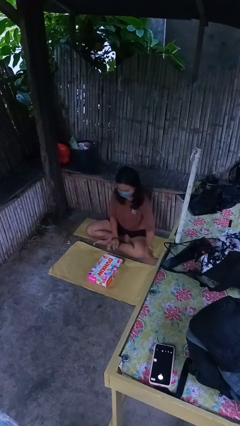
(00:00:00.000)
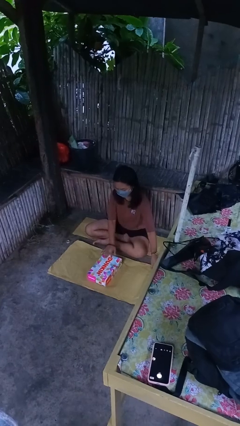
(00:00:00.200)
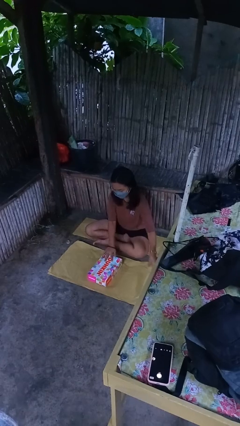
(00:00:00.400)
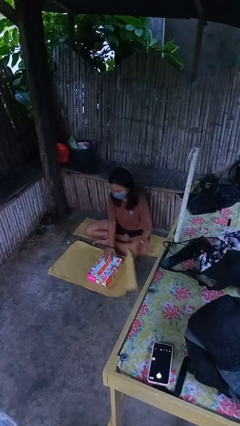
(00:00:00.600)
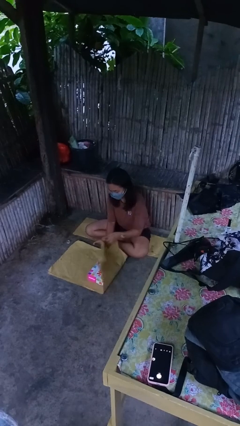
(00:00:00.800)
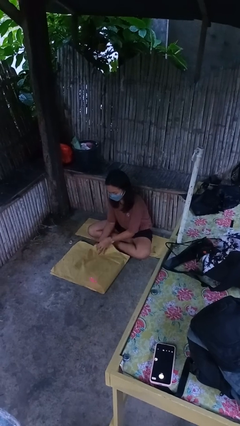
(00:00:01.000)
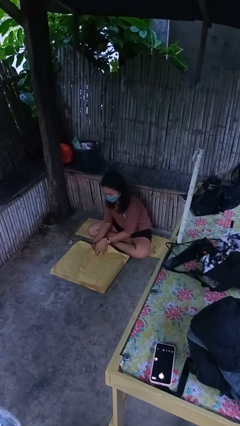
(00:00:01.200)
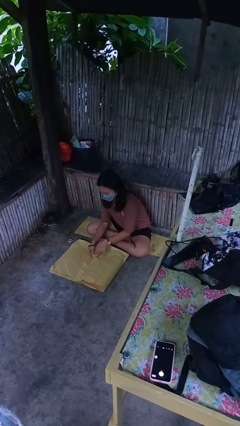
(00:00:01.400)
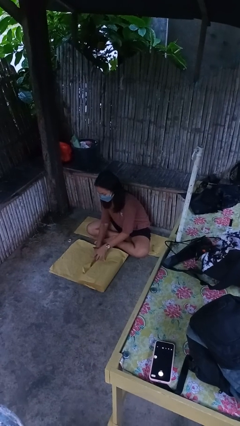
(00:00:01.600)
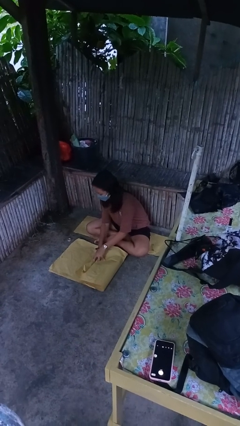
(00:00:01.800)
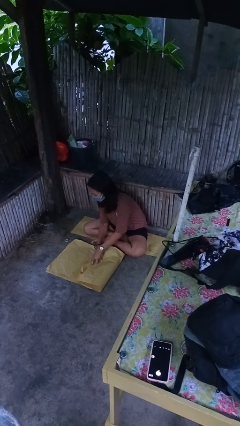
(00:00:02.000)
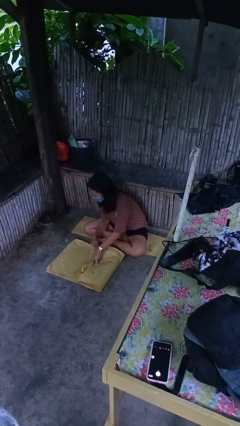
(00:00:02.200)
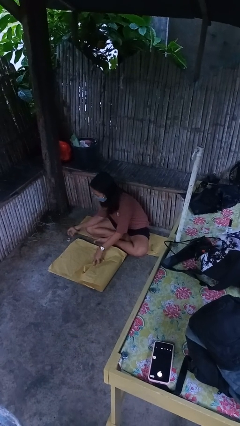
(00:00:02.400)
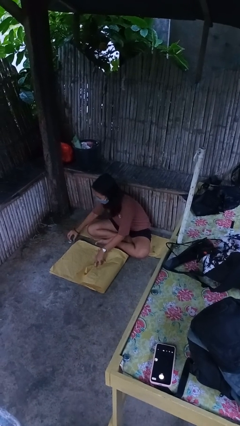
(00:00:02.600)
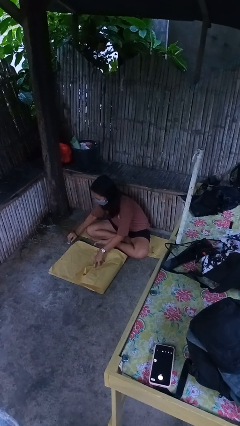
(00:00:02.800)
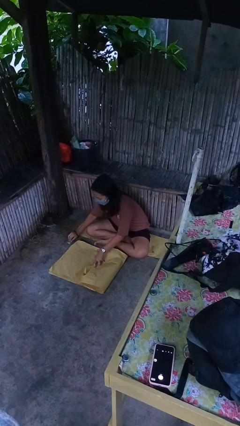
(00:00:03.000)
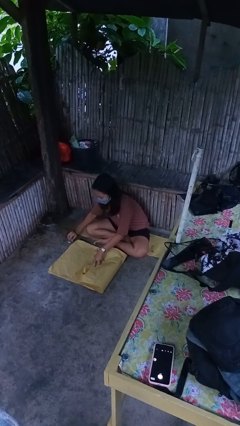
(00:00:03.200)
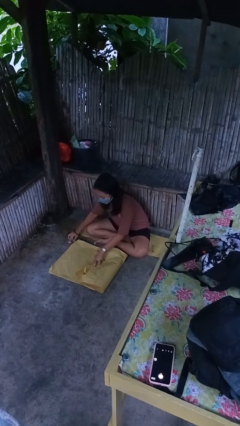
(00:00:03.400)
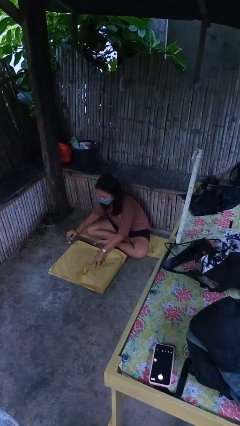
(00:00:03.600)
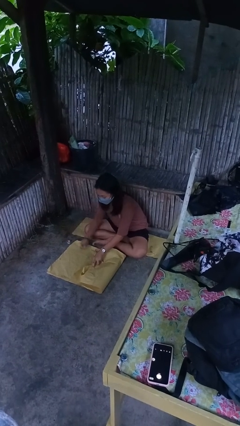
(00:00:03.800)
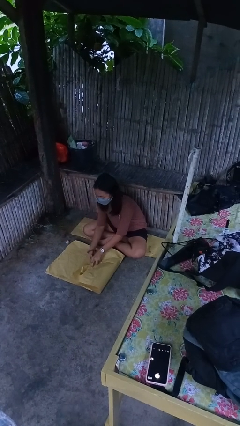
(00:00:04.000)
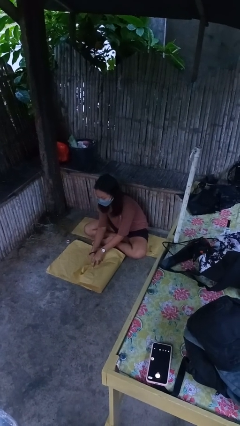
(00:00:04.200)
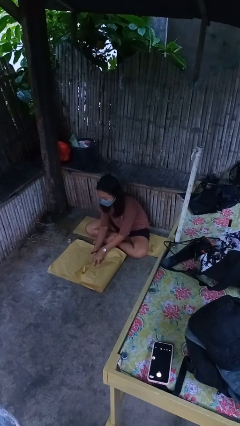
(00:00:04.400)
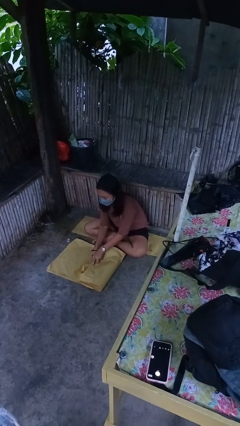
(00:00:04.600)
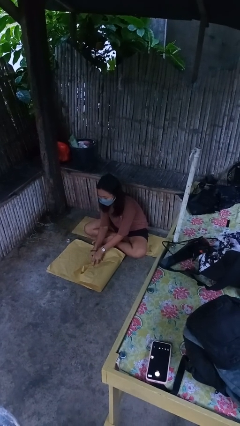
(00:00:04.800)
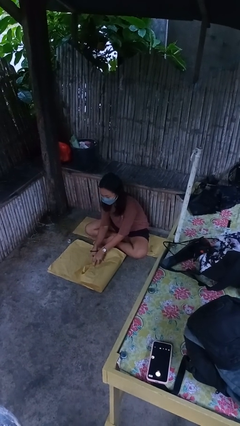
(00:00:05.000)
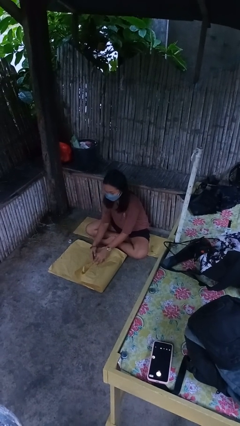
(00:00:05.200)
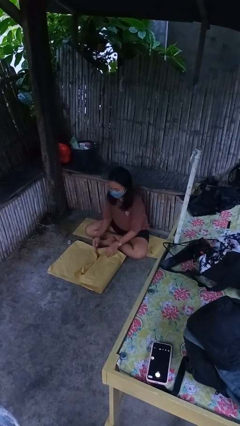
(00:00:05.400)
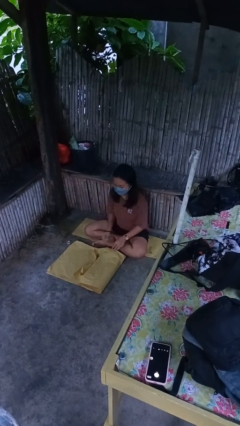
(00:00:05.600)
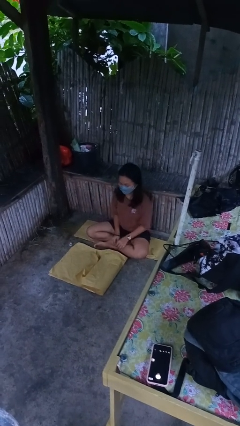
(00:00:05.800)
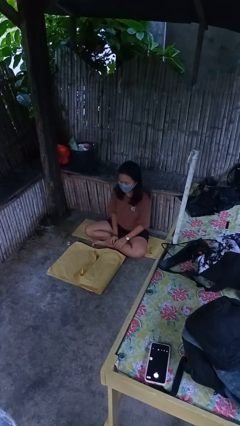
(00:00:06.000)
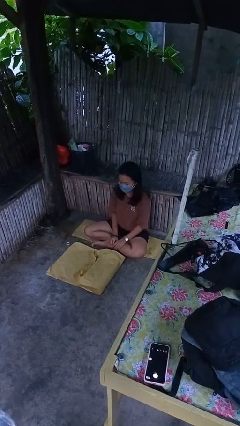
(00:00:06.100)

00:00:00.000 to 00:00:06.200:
person wraps box

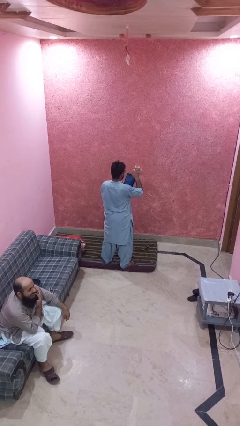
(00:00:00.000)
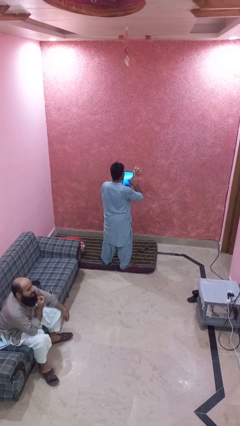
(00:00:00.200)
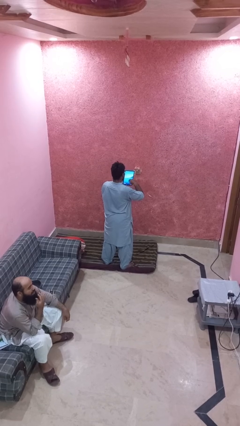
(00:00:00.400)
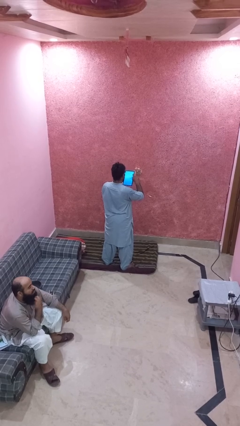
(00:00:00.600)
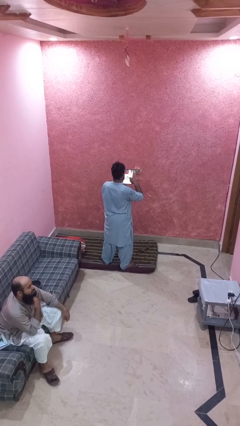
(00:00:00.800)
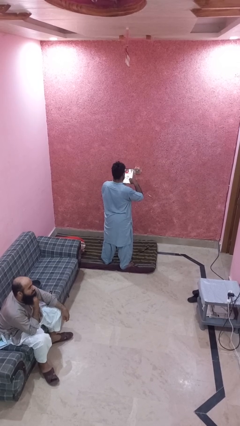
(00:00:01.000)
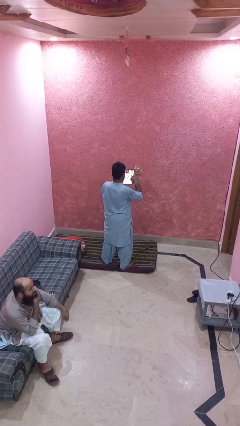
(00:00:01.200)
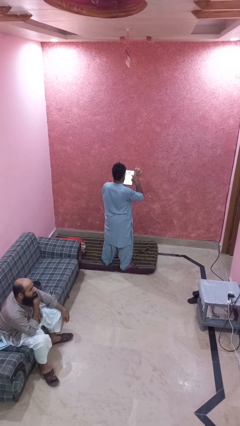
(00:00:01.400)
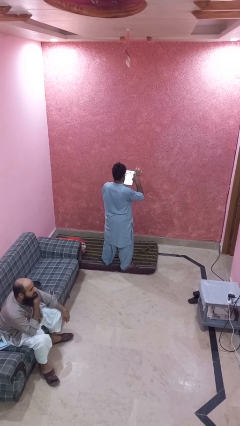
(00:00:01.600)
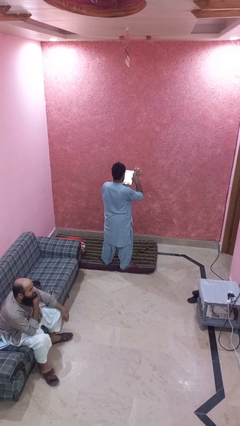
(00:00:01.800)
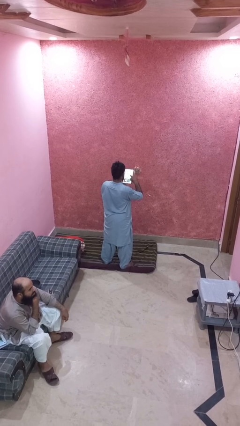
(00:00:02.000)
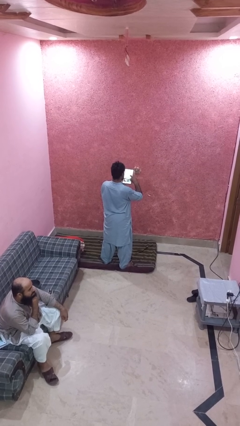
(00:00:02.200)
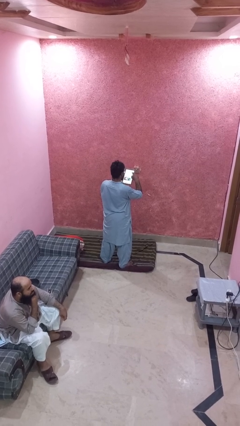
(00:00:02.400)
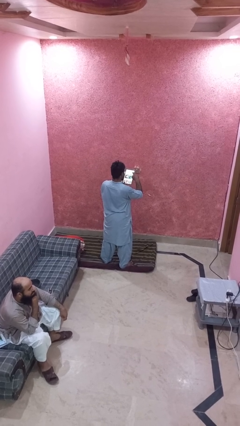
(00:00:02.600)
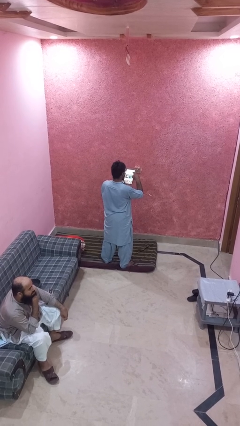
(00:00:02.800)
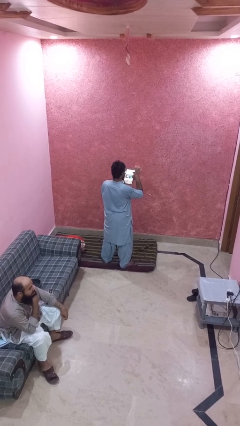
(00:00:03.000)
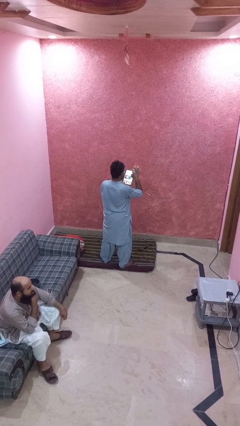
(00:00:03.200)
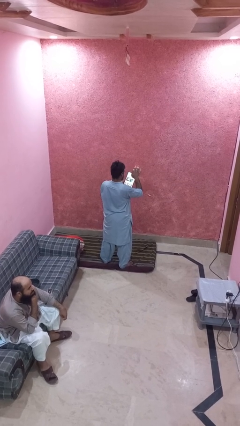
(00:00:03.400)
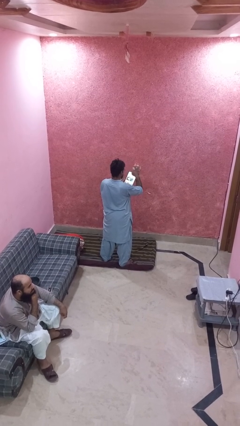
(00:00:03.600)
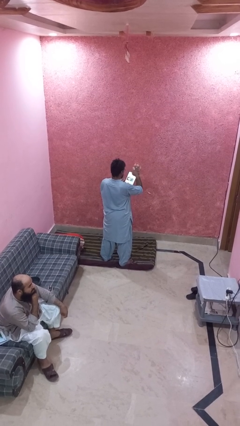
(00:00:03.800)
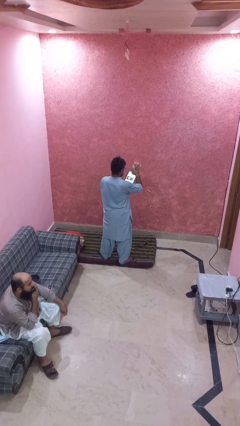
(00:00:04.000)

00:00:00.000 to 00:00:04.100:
person interacts with tablet

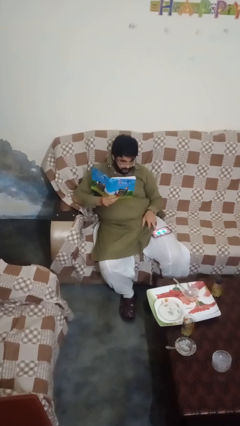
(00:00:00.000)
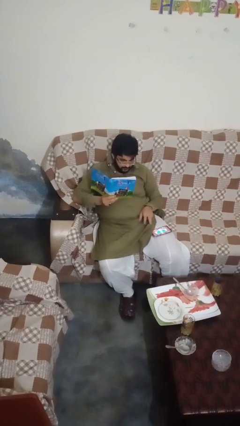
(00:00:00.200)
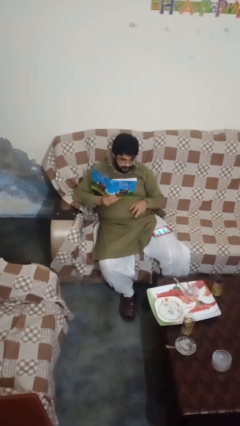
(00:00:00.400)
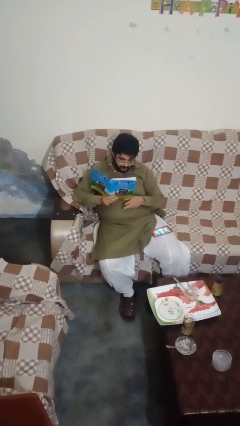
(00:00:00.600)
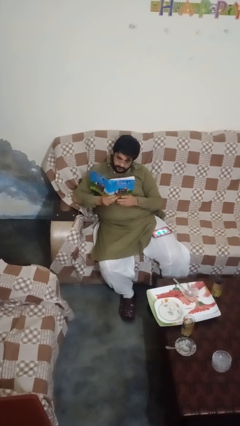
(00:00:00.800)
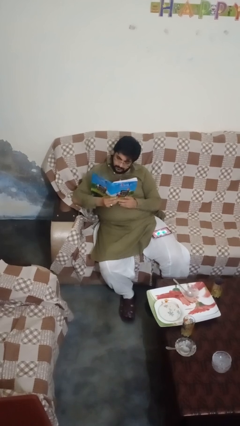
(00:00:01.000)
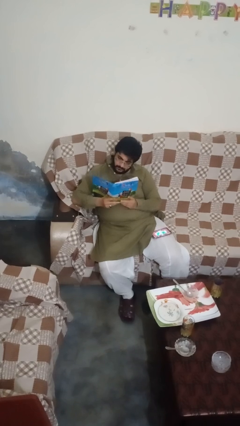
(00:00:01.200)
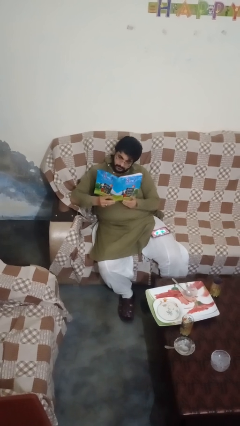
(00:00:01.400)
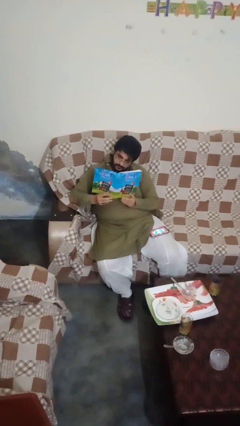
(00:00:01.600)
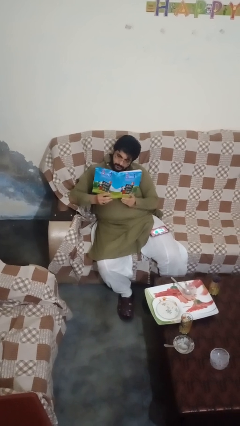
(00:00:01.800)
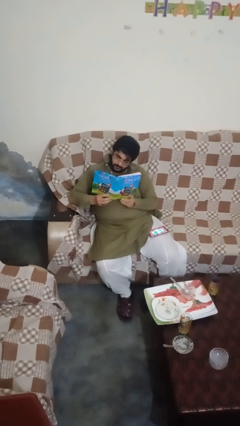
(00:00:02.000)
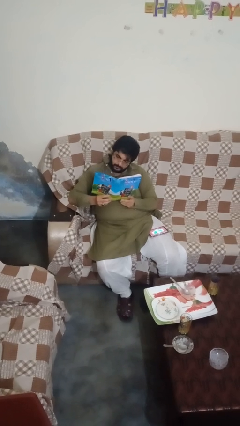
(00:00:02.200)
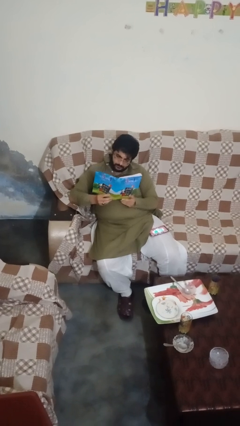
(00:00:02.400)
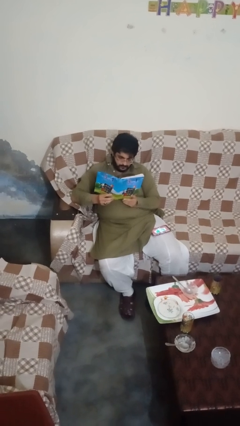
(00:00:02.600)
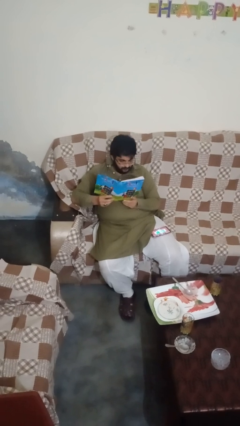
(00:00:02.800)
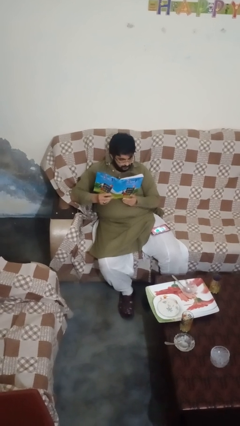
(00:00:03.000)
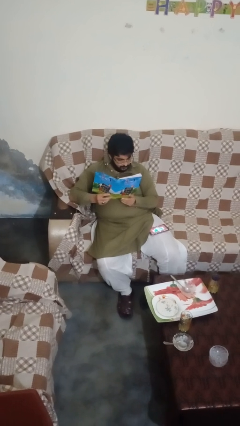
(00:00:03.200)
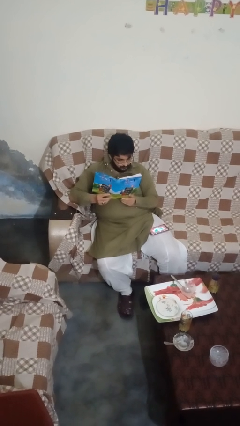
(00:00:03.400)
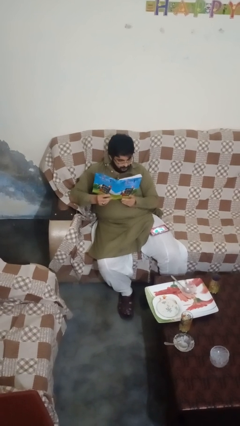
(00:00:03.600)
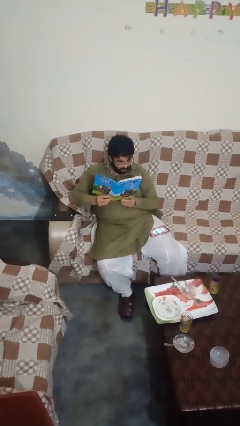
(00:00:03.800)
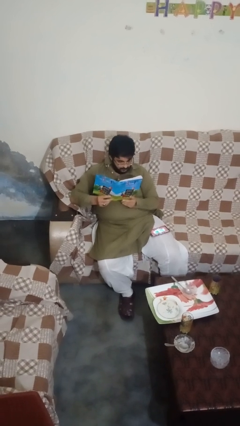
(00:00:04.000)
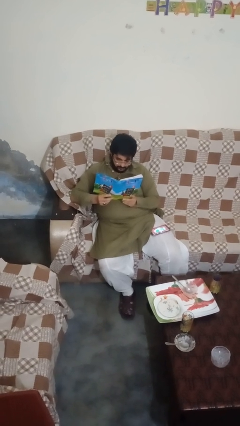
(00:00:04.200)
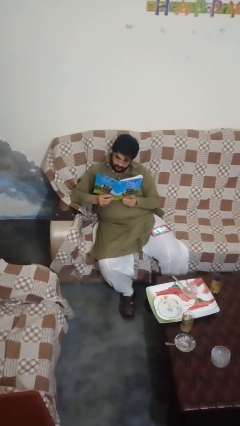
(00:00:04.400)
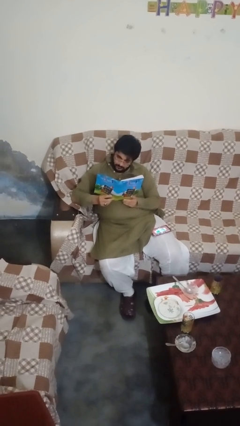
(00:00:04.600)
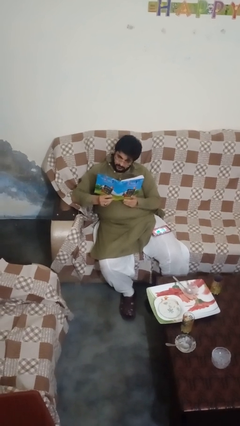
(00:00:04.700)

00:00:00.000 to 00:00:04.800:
person reads magazine

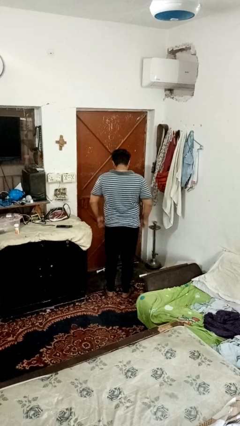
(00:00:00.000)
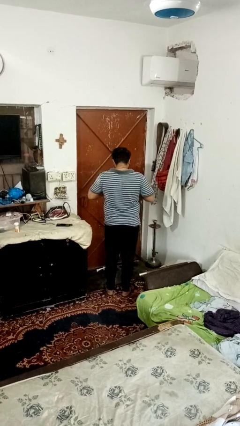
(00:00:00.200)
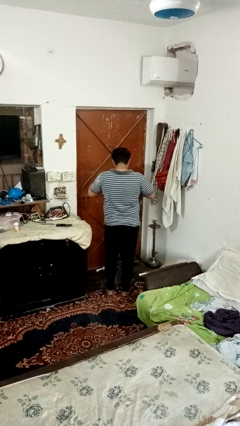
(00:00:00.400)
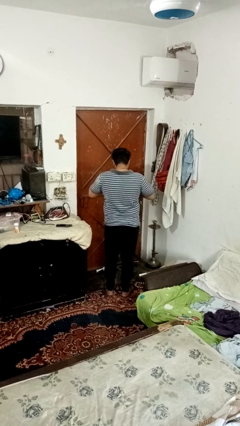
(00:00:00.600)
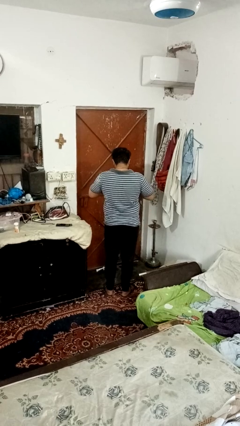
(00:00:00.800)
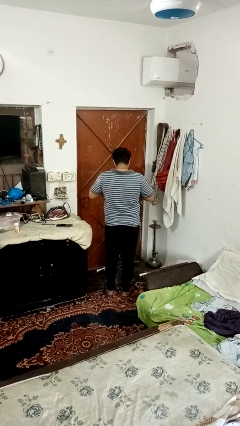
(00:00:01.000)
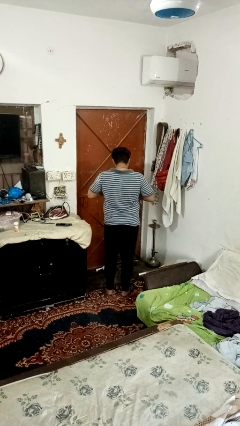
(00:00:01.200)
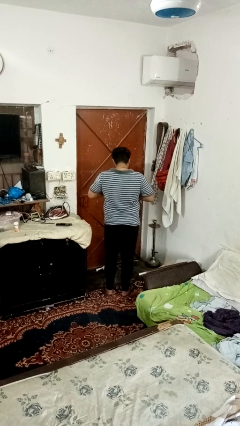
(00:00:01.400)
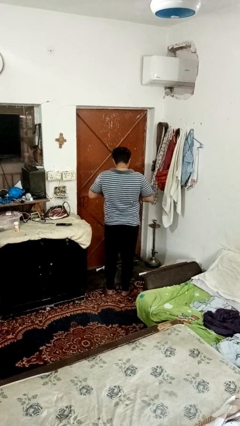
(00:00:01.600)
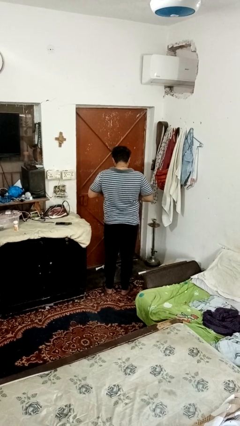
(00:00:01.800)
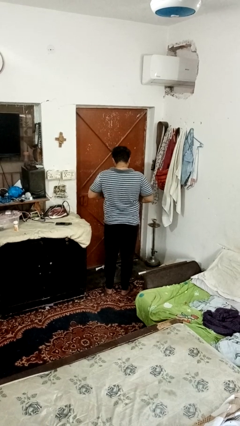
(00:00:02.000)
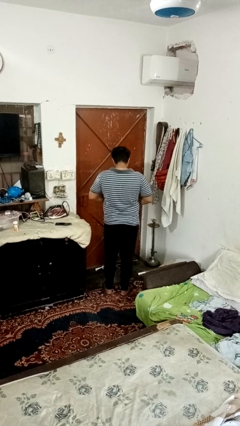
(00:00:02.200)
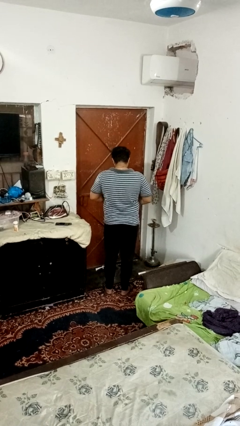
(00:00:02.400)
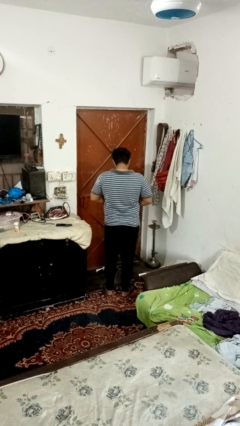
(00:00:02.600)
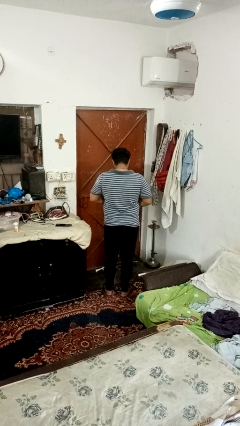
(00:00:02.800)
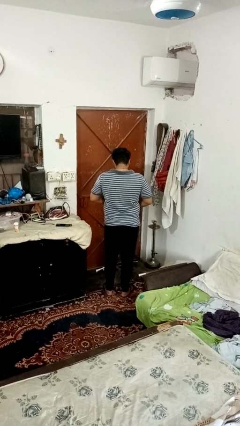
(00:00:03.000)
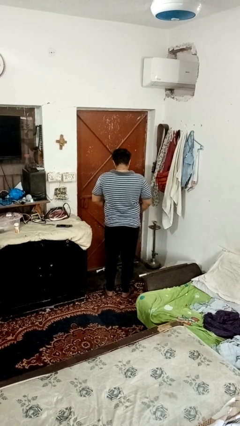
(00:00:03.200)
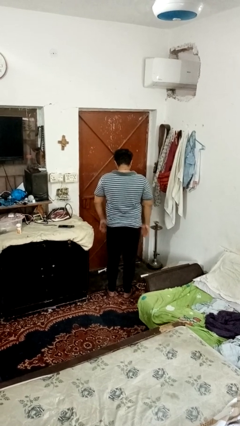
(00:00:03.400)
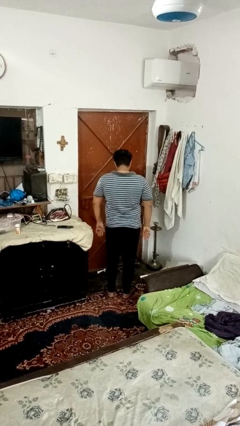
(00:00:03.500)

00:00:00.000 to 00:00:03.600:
person unbuttons shirt
